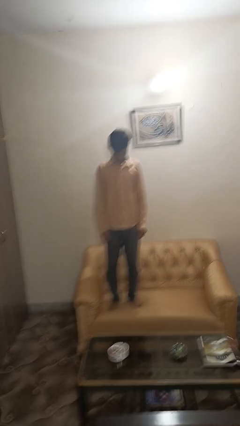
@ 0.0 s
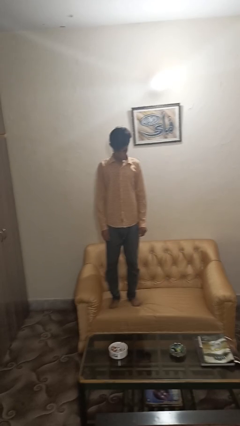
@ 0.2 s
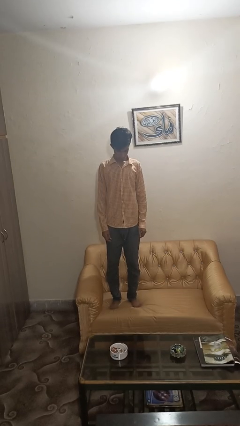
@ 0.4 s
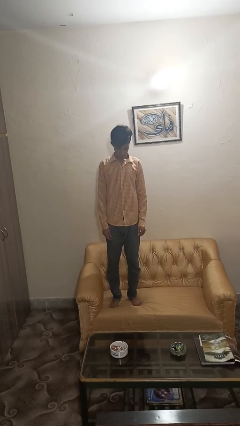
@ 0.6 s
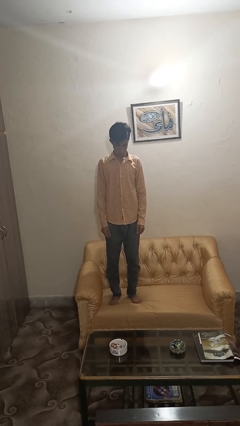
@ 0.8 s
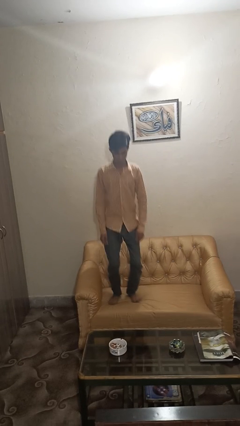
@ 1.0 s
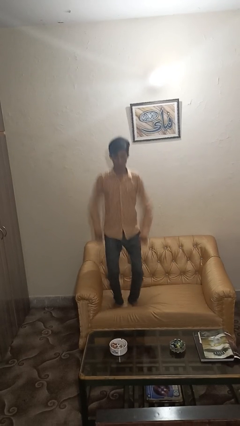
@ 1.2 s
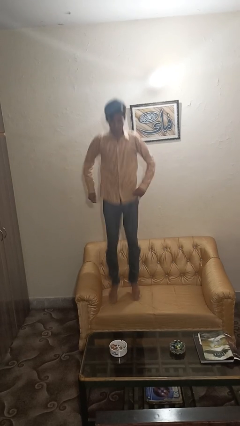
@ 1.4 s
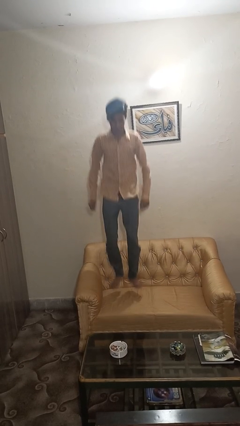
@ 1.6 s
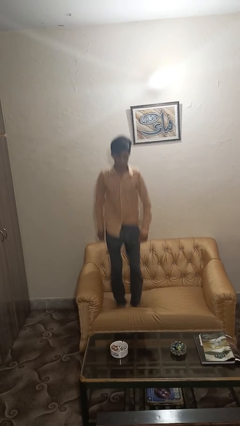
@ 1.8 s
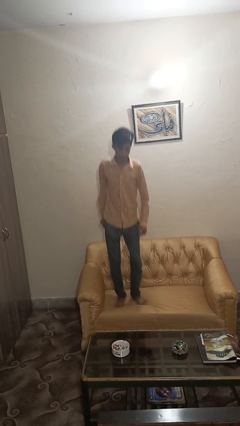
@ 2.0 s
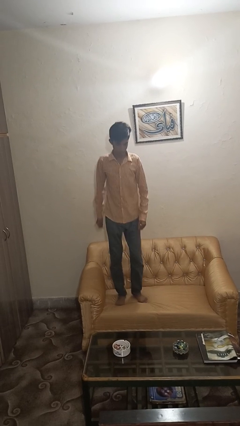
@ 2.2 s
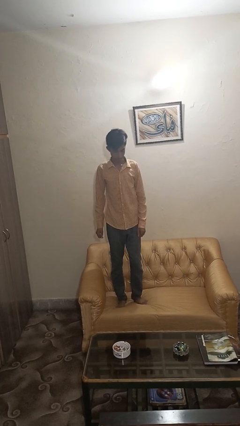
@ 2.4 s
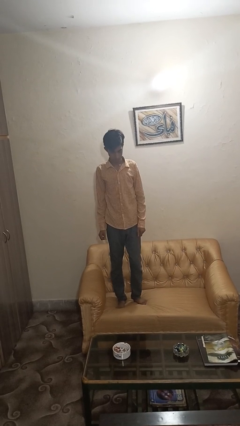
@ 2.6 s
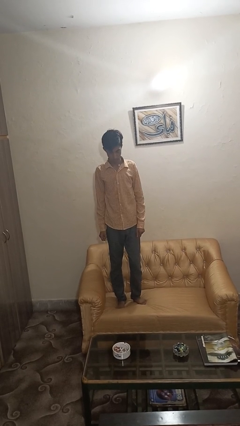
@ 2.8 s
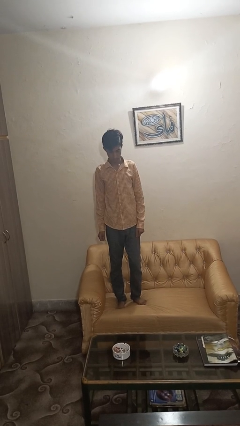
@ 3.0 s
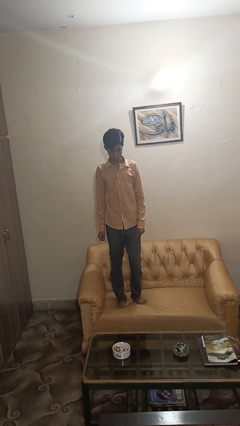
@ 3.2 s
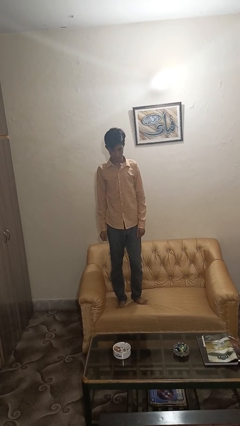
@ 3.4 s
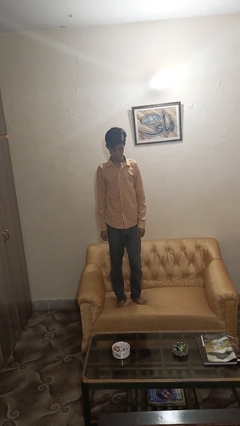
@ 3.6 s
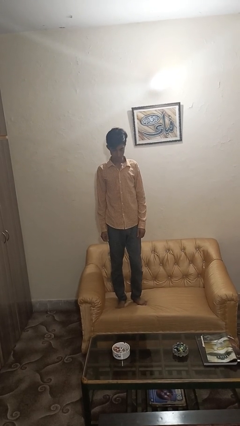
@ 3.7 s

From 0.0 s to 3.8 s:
person jumps on couch

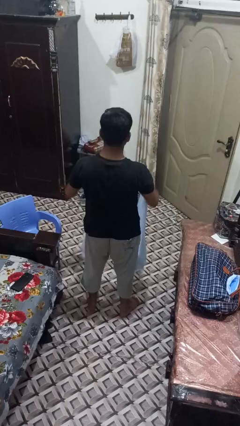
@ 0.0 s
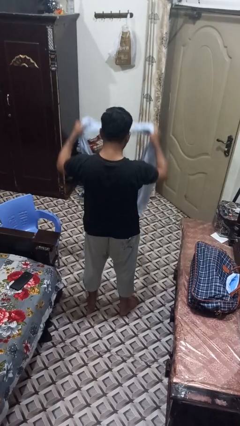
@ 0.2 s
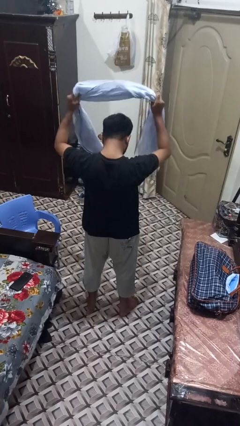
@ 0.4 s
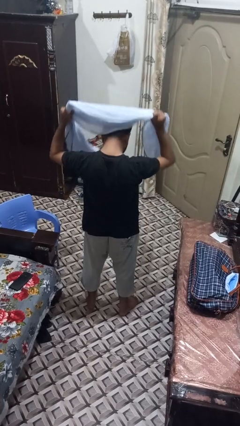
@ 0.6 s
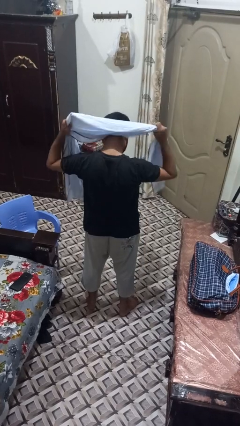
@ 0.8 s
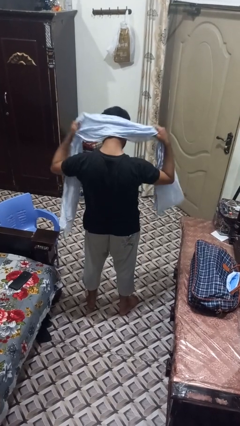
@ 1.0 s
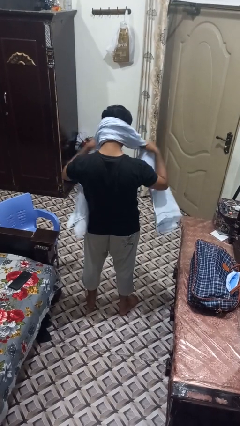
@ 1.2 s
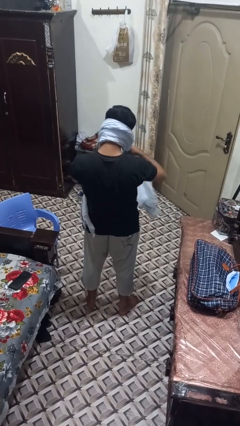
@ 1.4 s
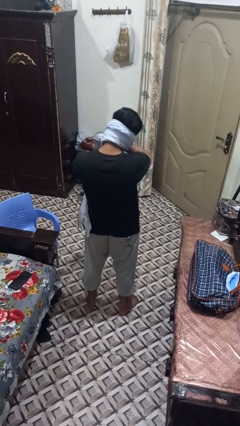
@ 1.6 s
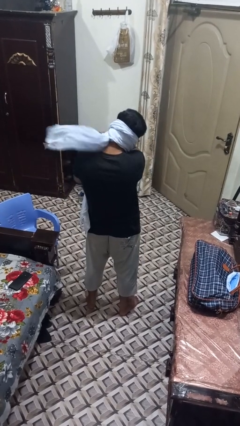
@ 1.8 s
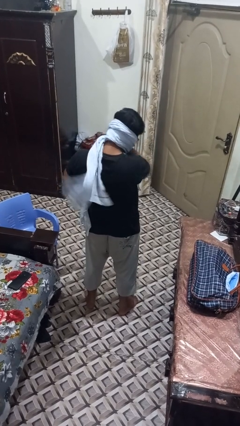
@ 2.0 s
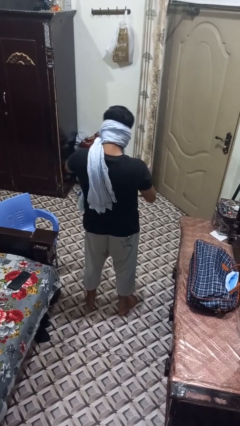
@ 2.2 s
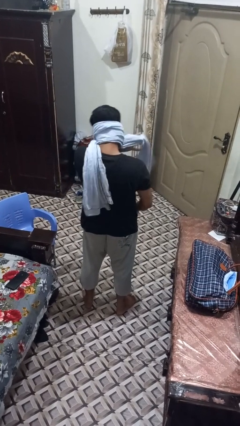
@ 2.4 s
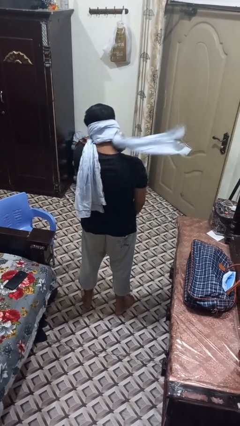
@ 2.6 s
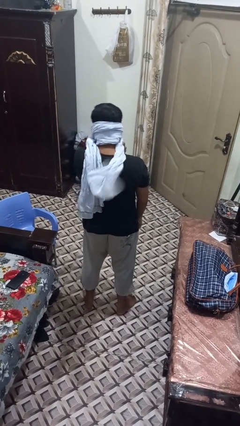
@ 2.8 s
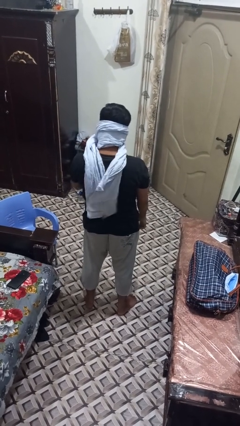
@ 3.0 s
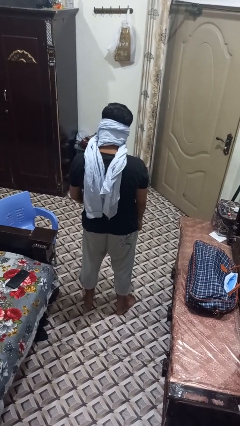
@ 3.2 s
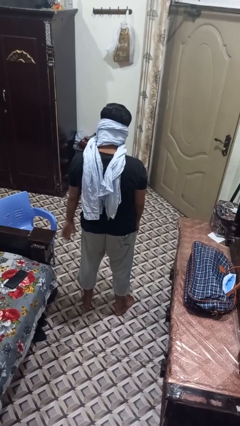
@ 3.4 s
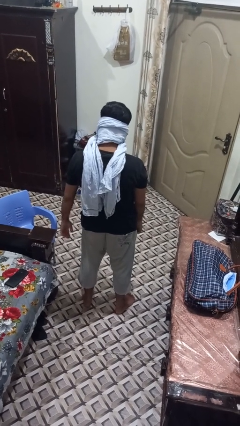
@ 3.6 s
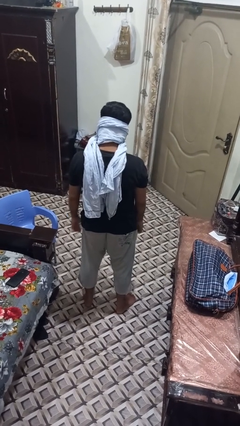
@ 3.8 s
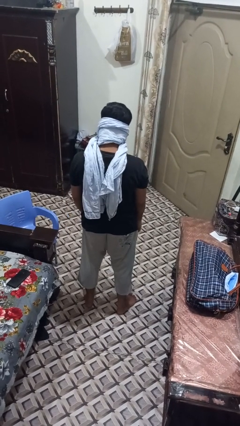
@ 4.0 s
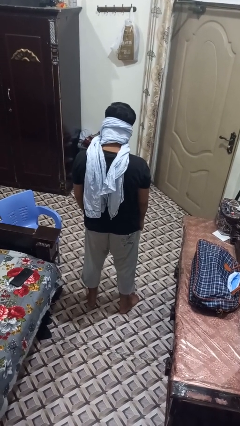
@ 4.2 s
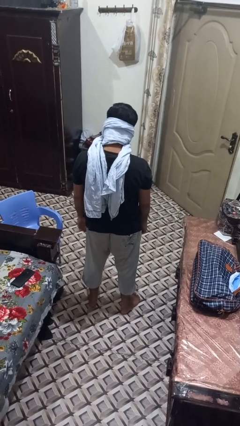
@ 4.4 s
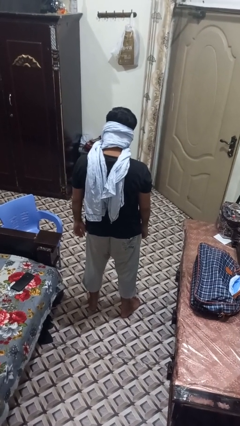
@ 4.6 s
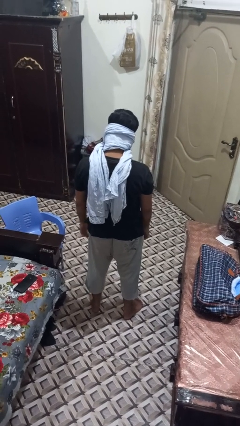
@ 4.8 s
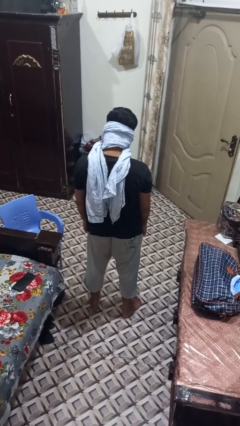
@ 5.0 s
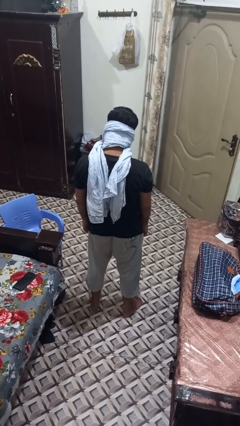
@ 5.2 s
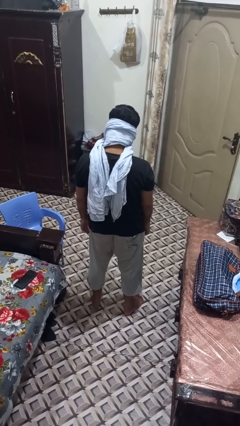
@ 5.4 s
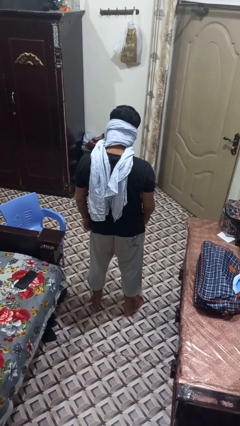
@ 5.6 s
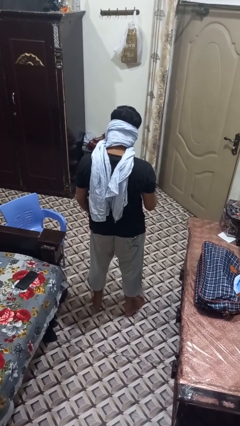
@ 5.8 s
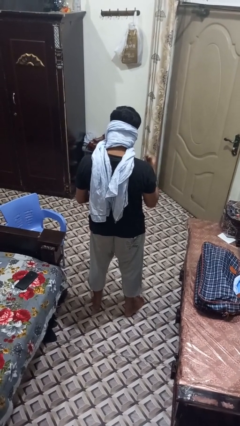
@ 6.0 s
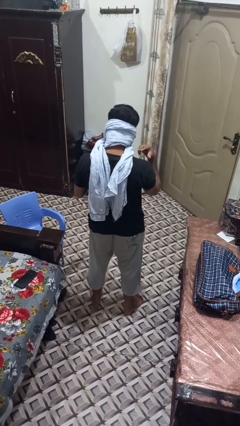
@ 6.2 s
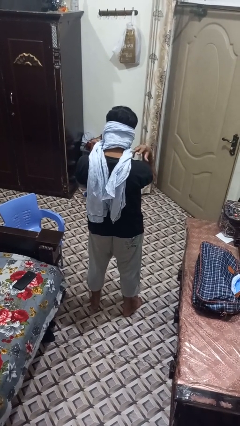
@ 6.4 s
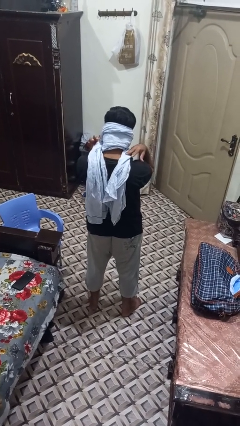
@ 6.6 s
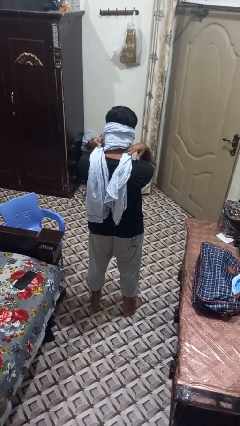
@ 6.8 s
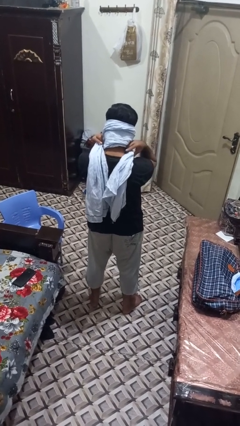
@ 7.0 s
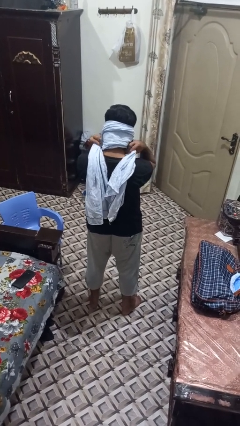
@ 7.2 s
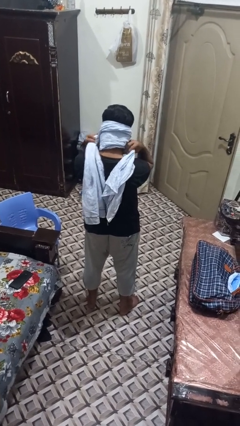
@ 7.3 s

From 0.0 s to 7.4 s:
person puts on scarf

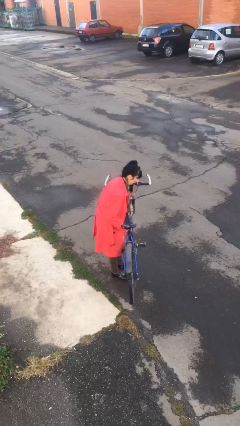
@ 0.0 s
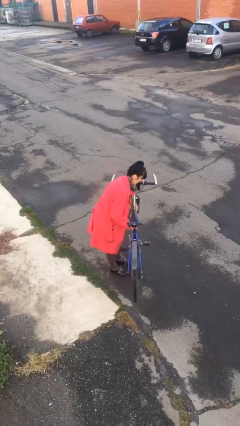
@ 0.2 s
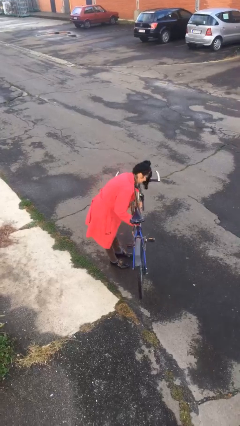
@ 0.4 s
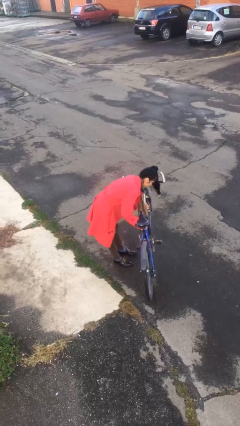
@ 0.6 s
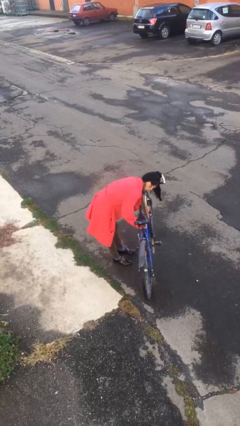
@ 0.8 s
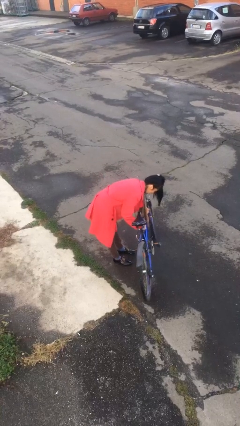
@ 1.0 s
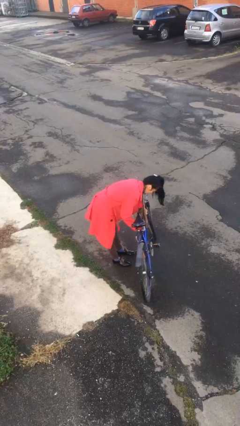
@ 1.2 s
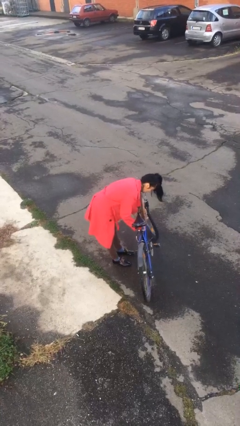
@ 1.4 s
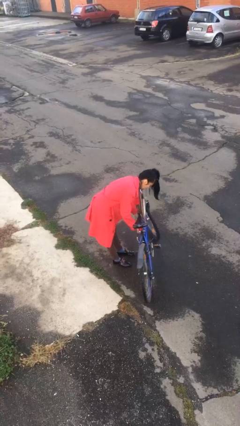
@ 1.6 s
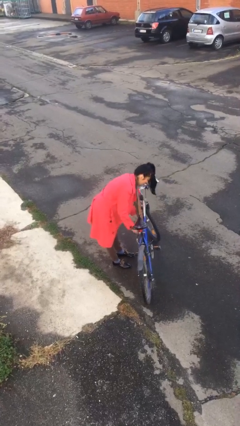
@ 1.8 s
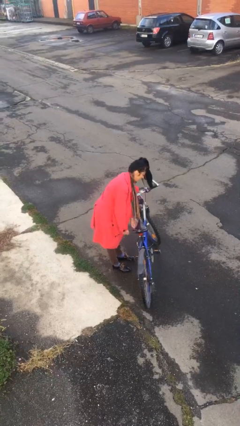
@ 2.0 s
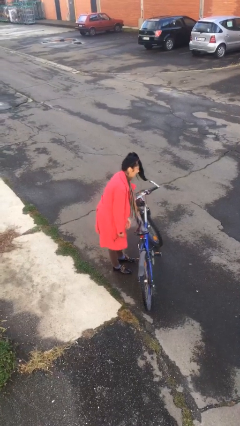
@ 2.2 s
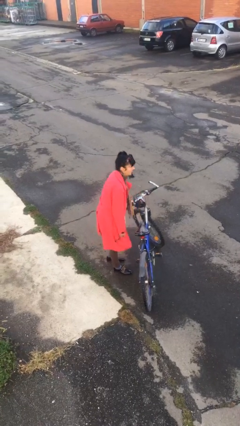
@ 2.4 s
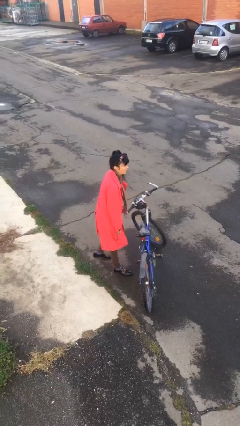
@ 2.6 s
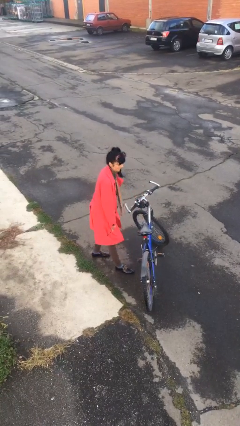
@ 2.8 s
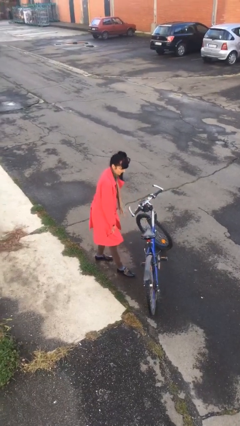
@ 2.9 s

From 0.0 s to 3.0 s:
person puts down object on floor

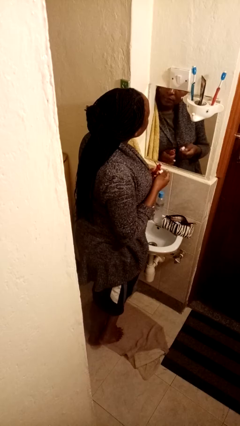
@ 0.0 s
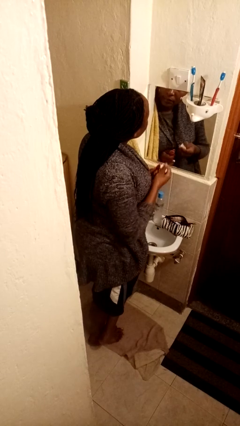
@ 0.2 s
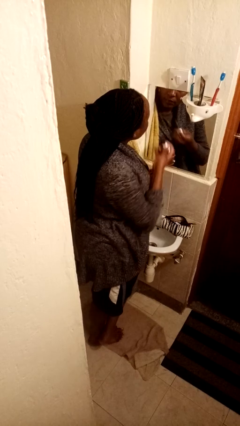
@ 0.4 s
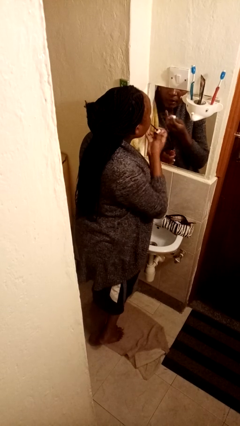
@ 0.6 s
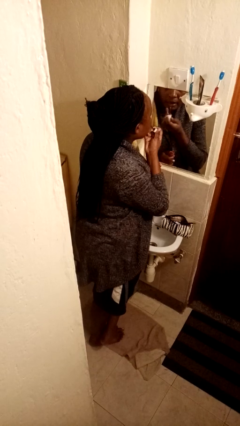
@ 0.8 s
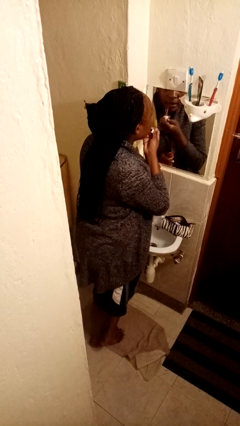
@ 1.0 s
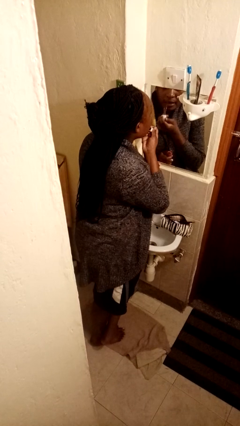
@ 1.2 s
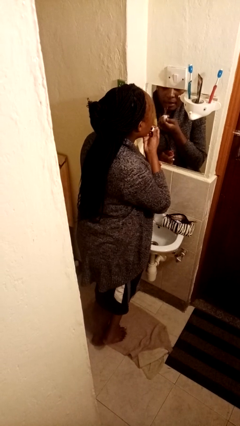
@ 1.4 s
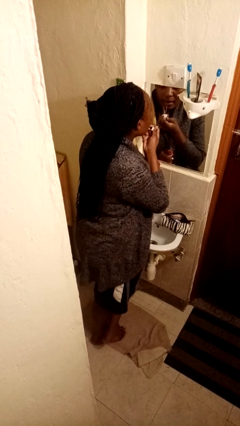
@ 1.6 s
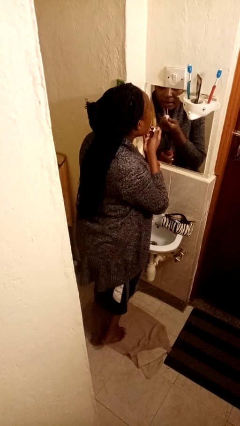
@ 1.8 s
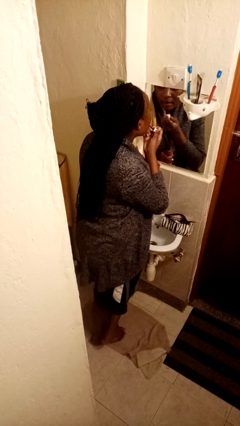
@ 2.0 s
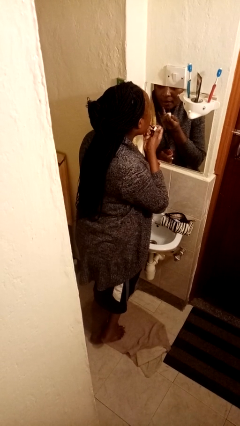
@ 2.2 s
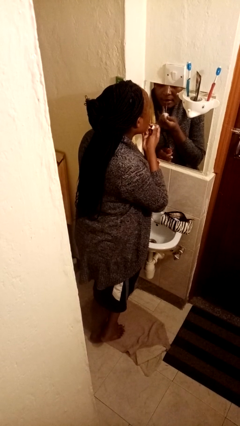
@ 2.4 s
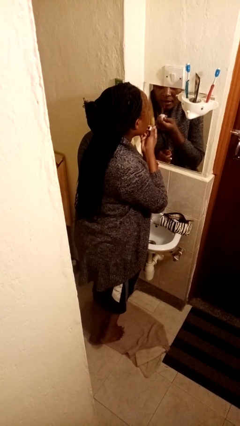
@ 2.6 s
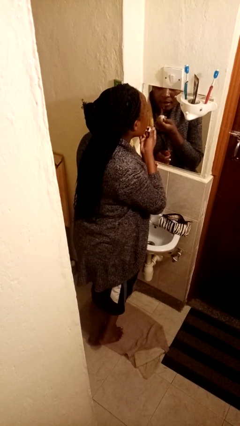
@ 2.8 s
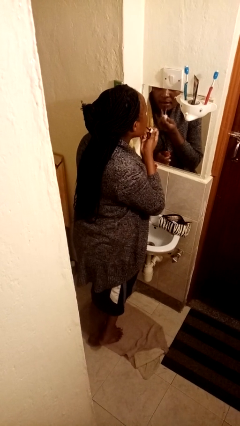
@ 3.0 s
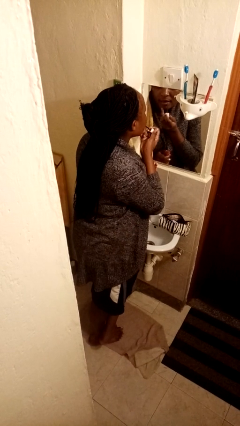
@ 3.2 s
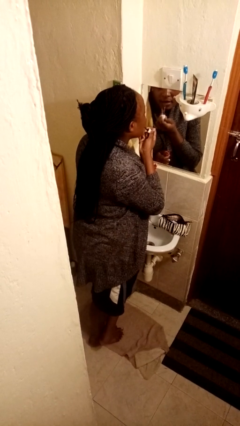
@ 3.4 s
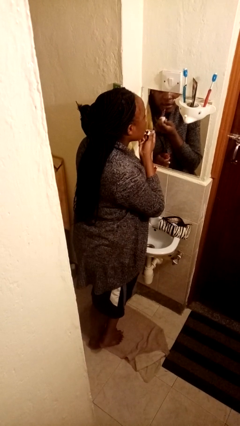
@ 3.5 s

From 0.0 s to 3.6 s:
person applies lip makeup
